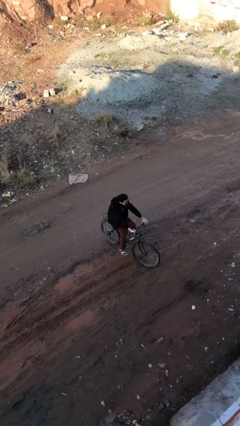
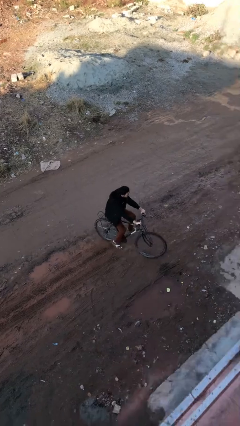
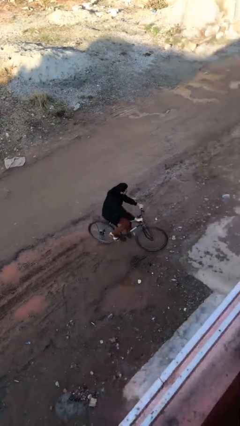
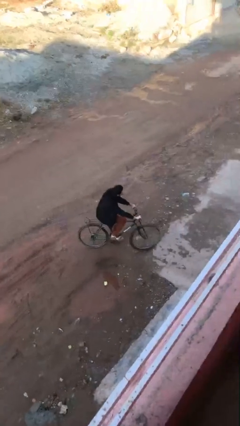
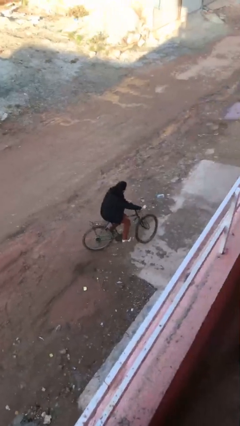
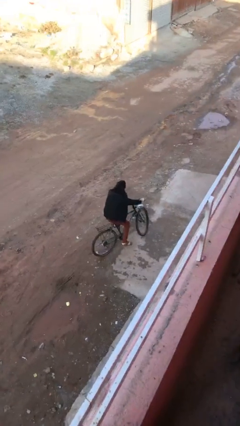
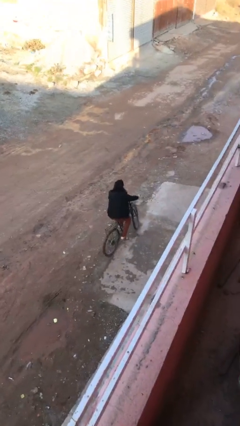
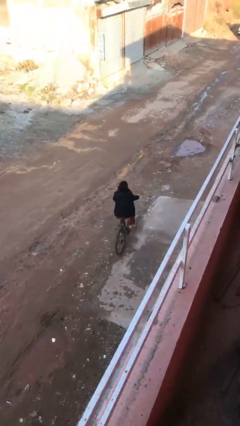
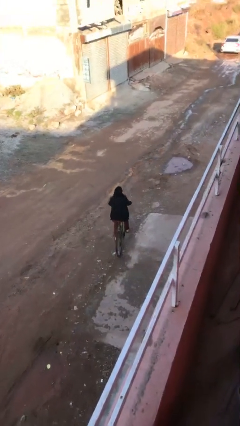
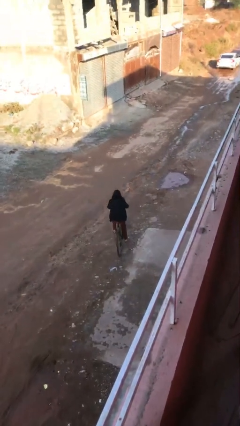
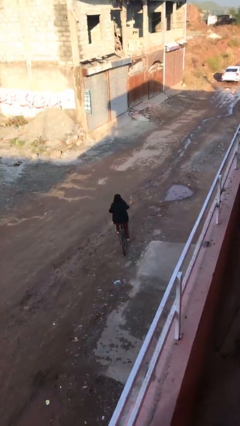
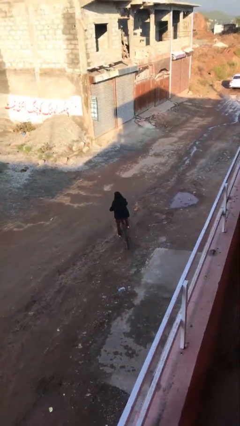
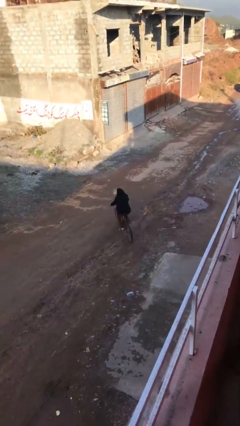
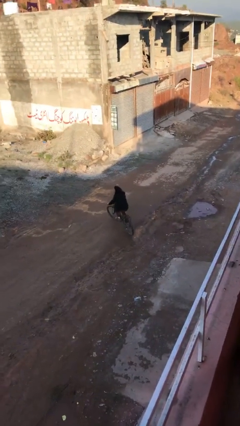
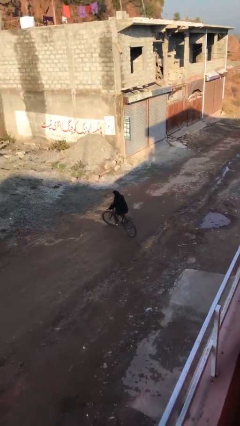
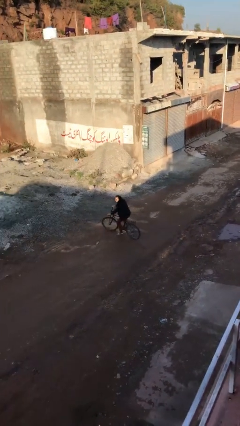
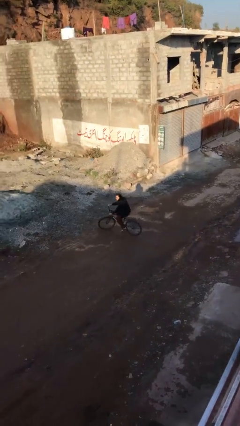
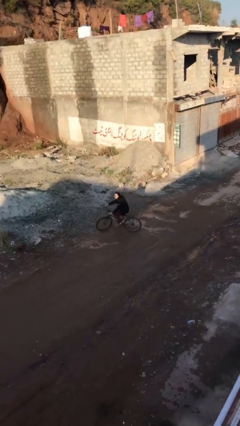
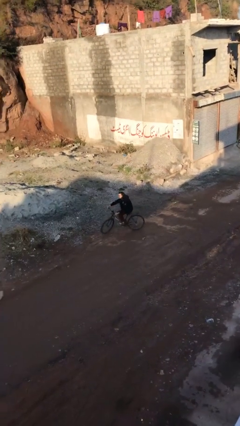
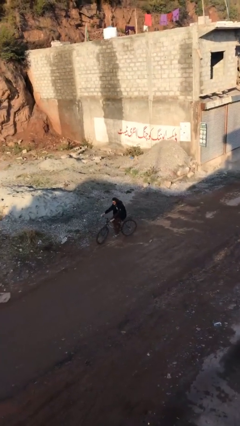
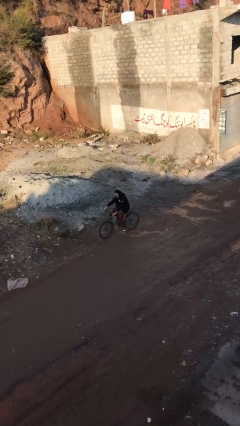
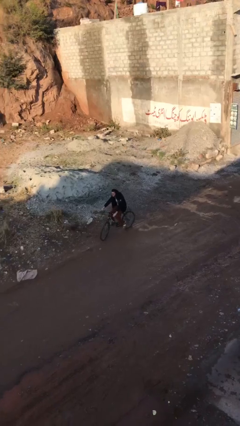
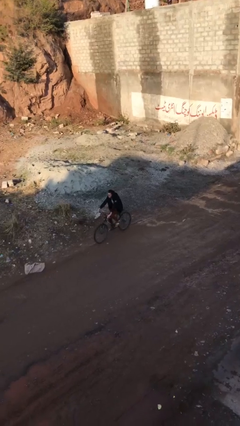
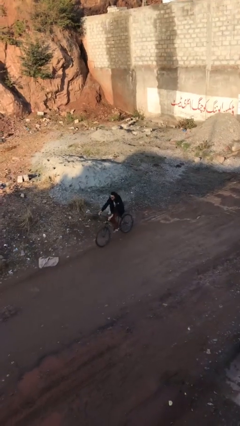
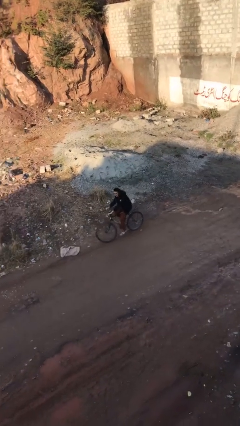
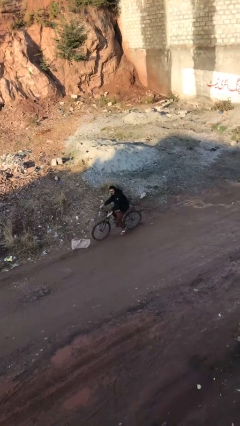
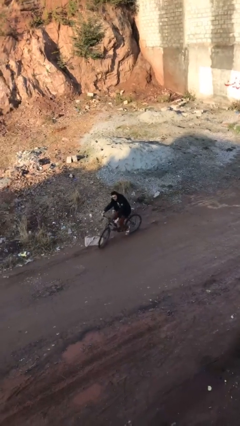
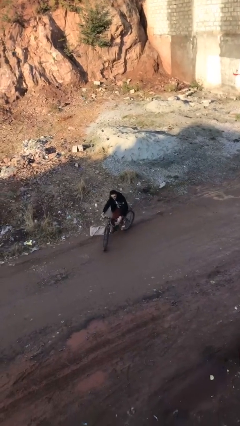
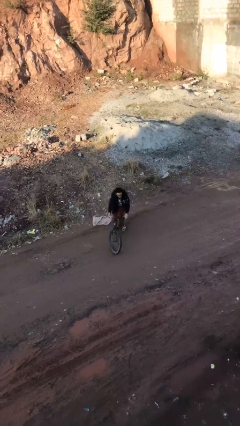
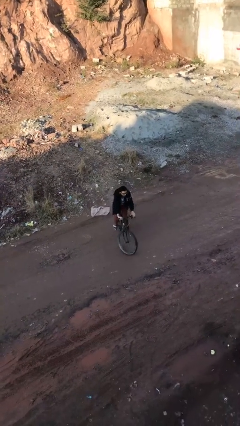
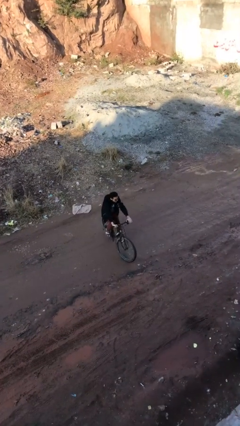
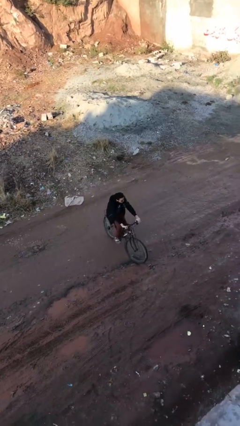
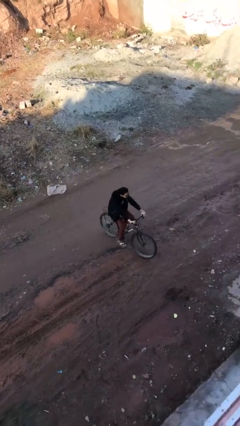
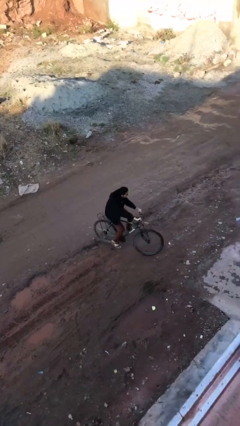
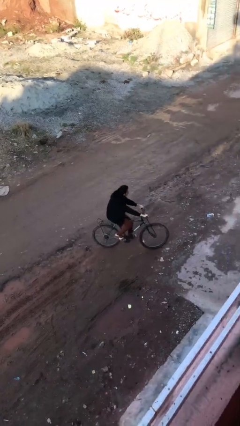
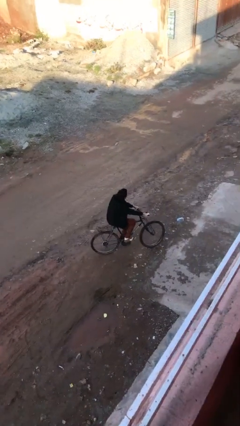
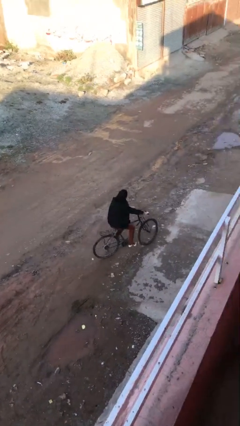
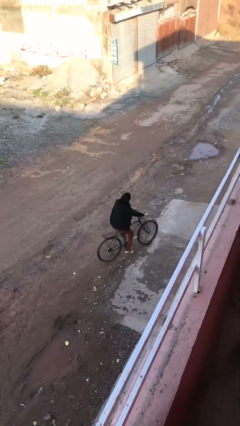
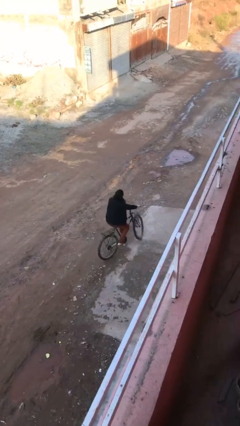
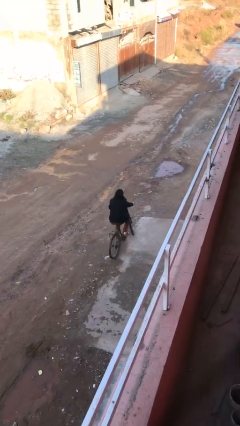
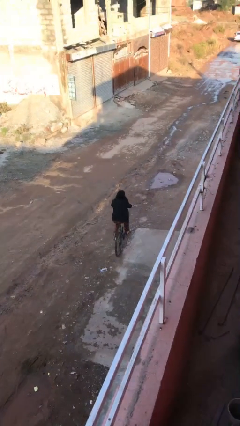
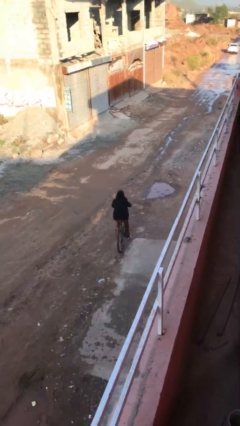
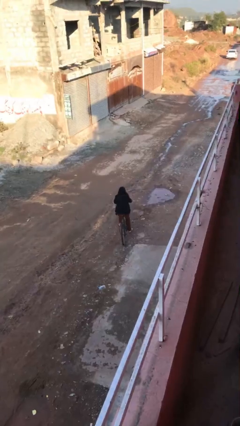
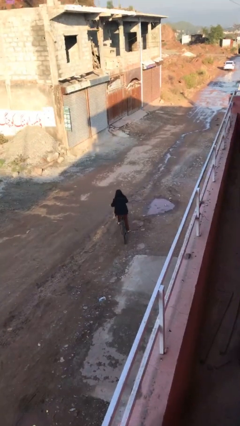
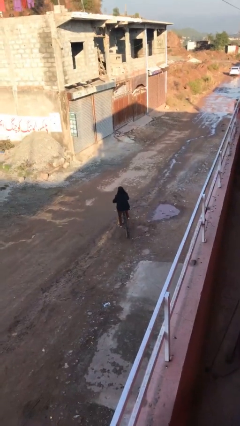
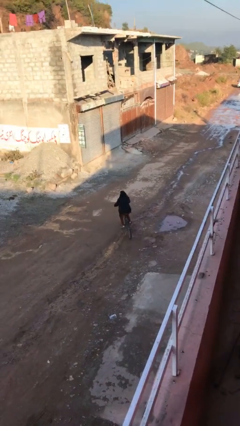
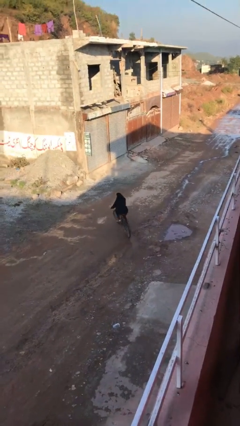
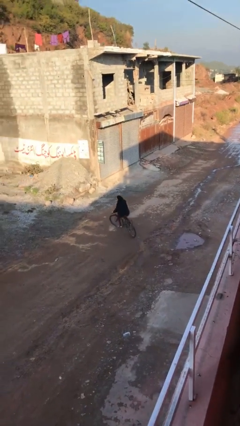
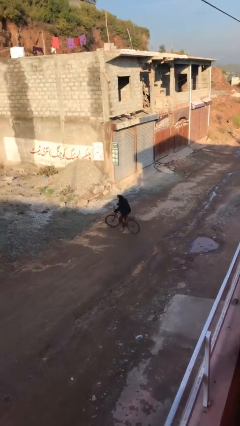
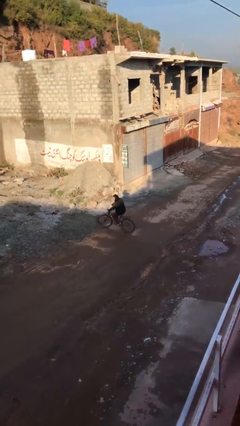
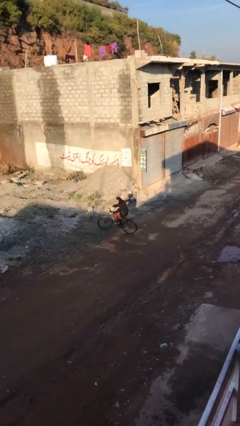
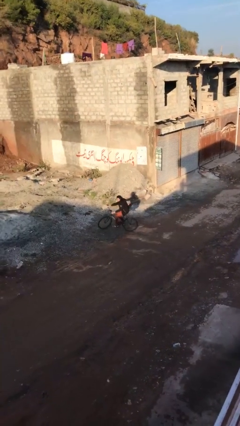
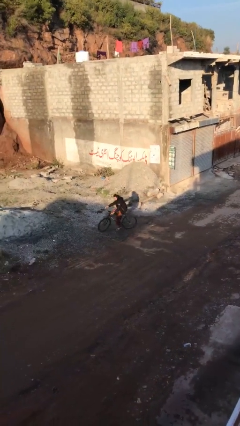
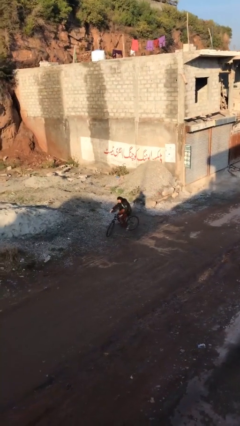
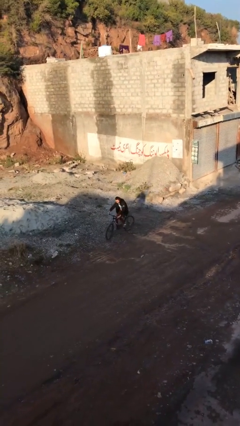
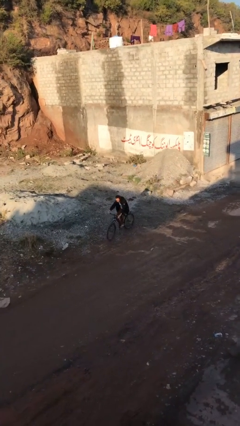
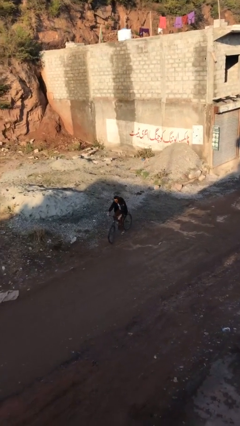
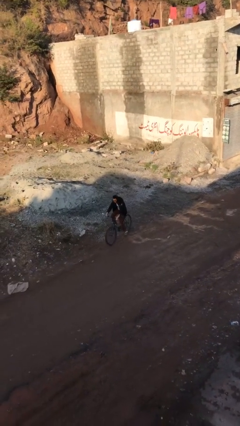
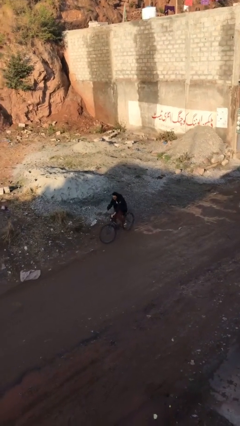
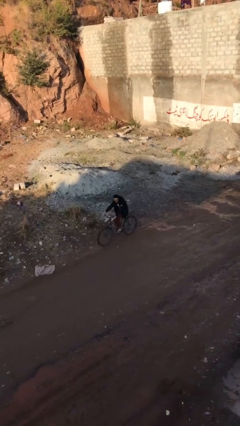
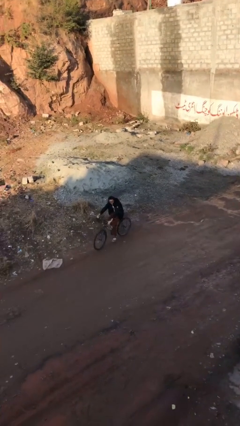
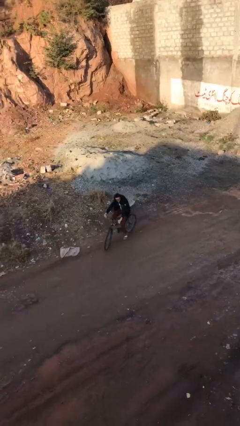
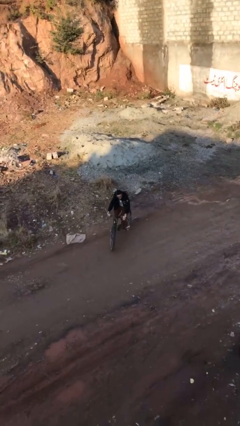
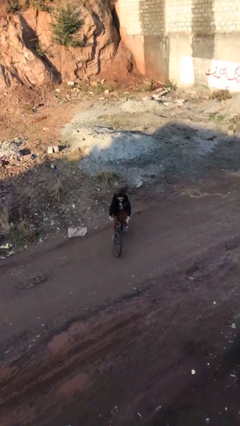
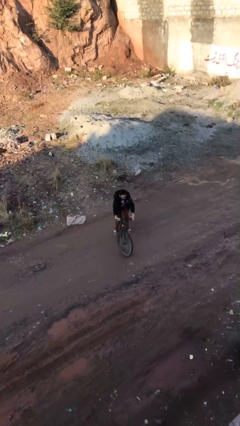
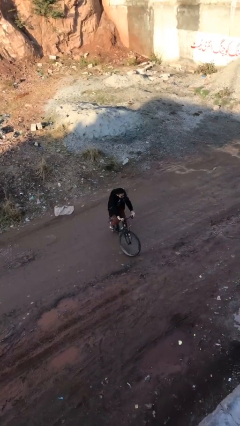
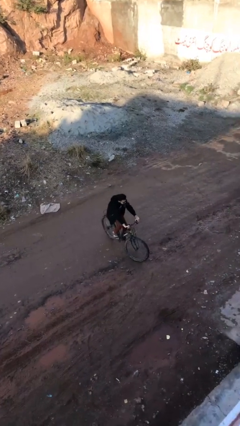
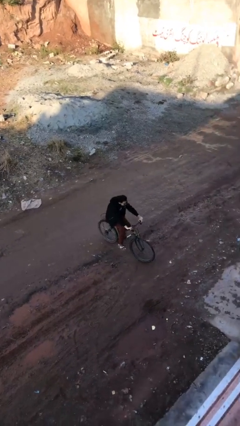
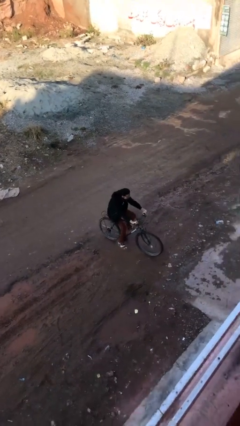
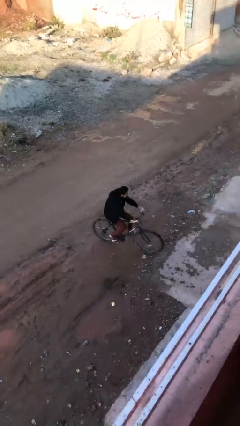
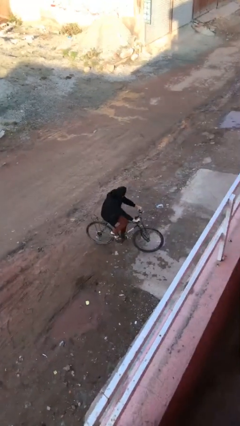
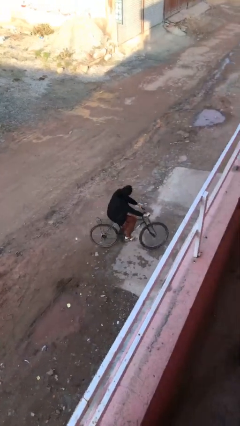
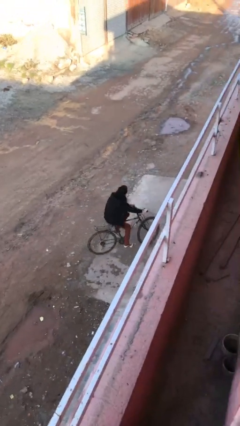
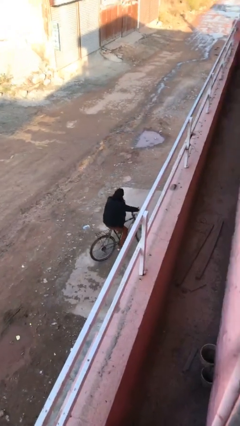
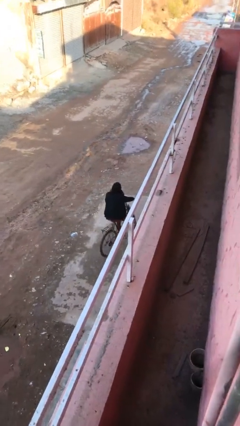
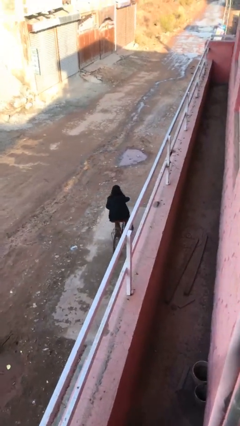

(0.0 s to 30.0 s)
person rides bicycle

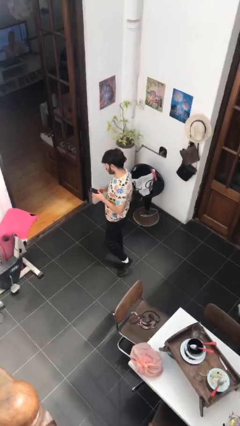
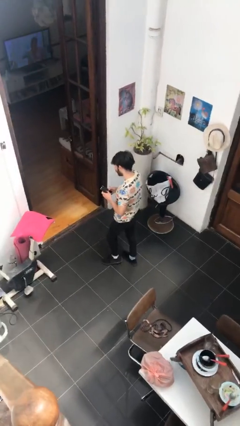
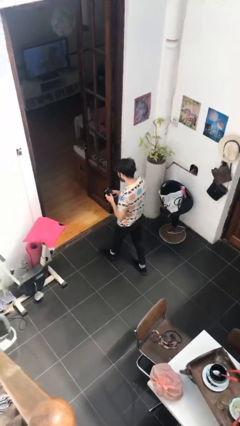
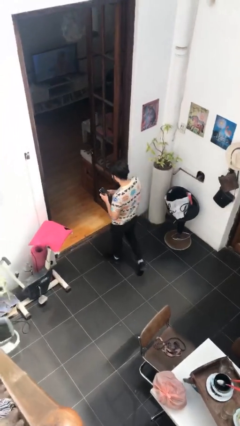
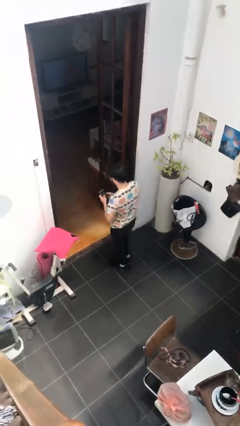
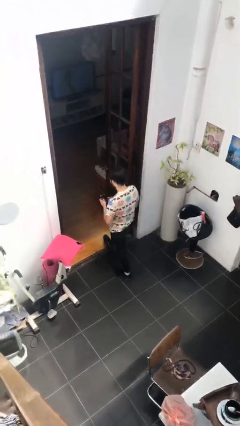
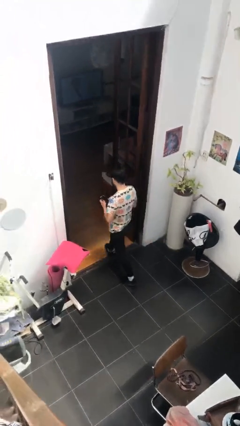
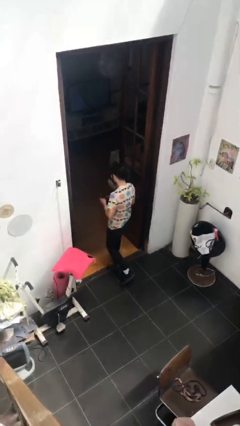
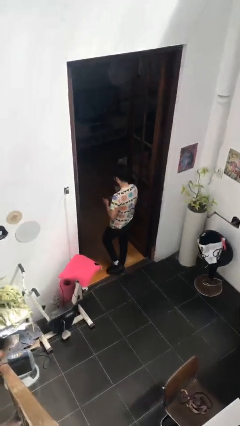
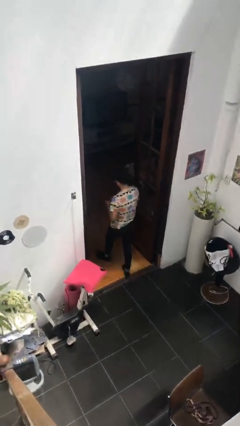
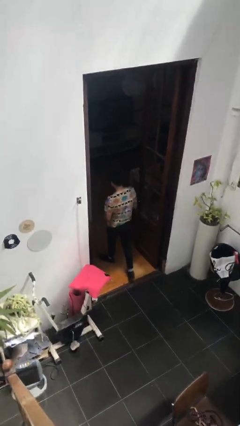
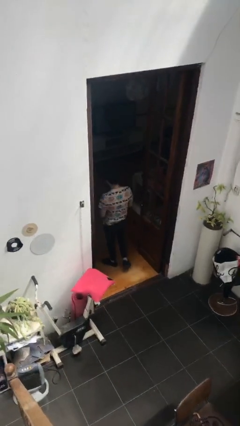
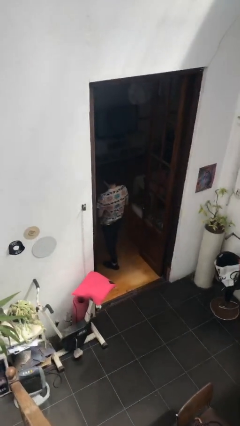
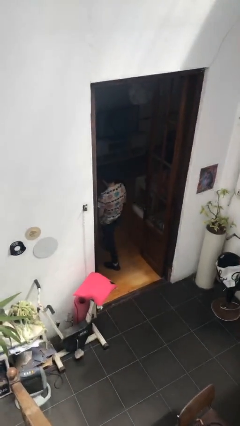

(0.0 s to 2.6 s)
person exits scene through structure
